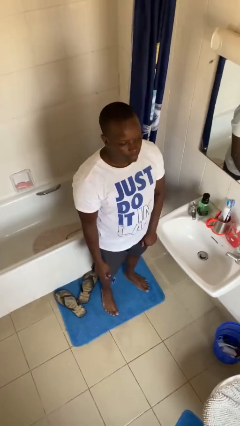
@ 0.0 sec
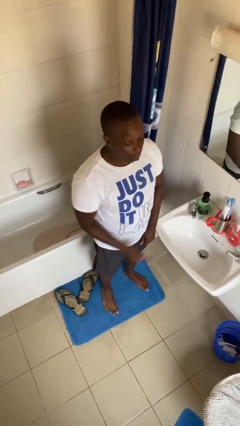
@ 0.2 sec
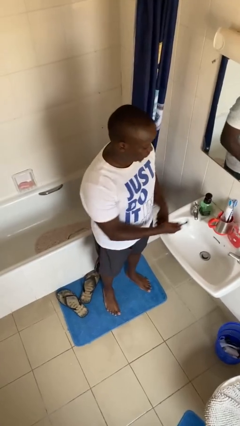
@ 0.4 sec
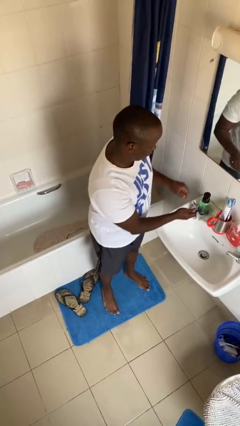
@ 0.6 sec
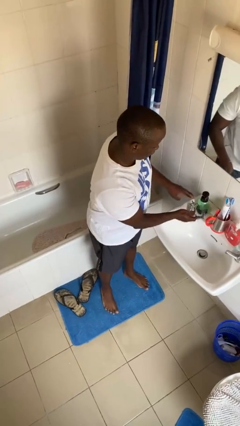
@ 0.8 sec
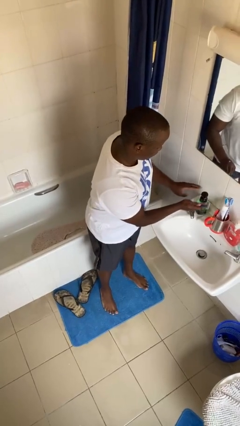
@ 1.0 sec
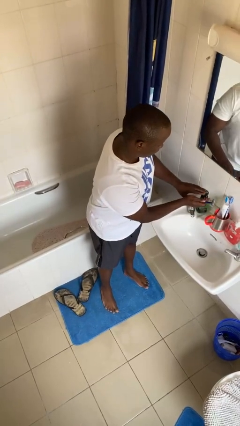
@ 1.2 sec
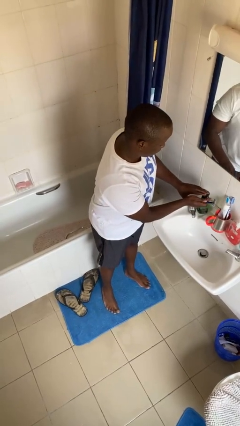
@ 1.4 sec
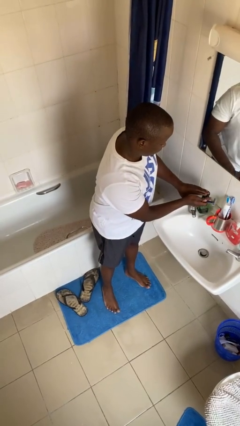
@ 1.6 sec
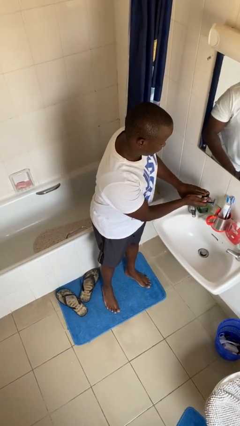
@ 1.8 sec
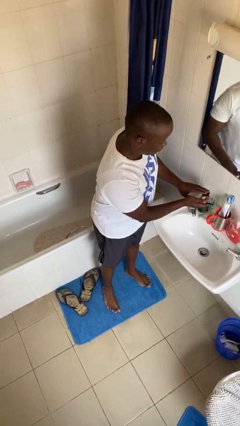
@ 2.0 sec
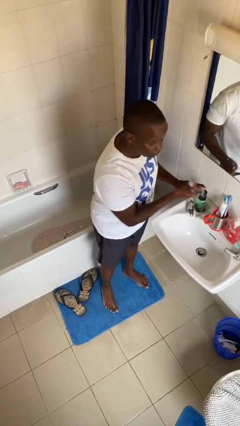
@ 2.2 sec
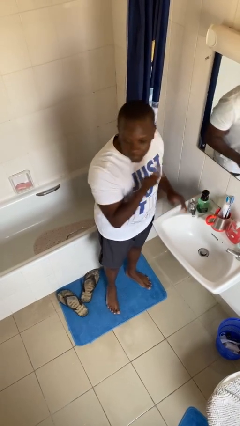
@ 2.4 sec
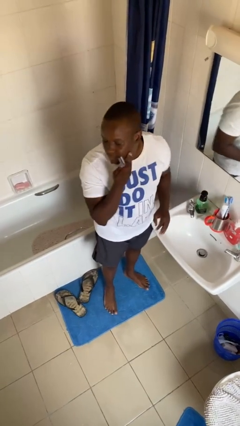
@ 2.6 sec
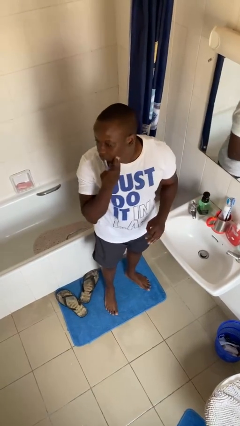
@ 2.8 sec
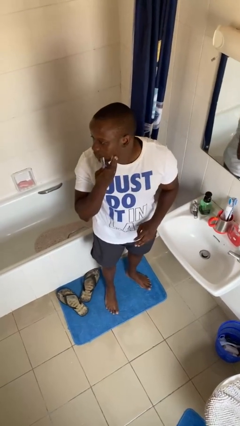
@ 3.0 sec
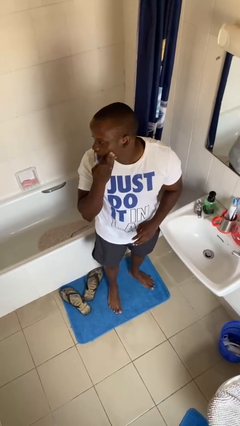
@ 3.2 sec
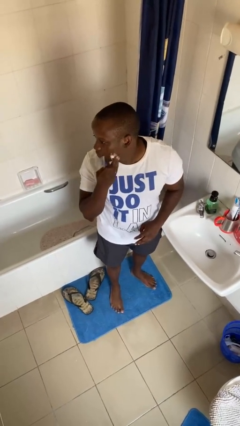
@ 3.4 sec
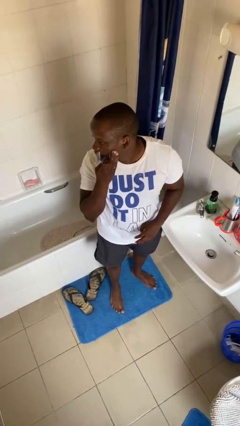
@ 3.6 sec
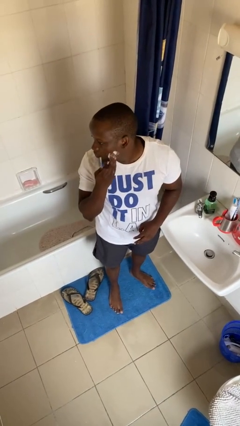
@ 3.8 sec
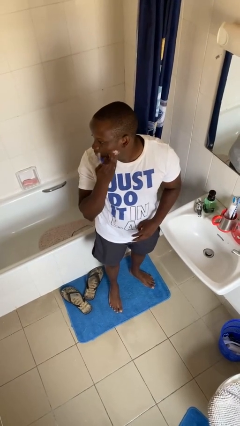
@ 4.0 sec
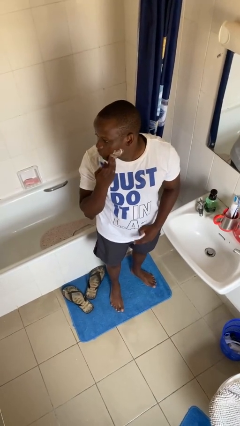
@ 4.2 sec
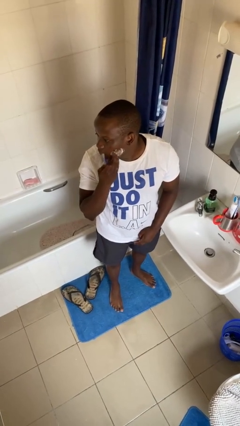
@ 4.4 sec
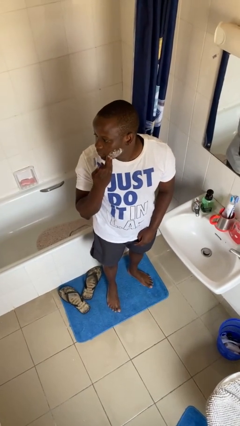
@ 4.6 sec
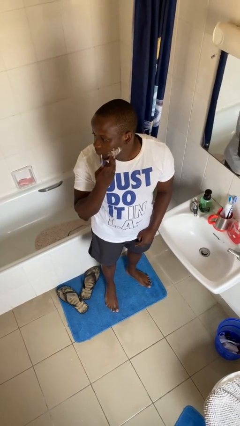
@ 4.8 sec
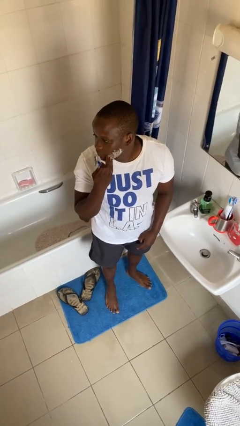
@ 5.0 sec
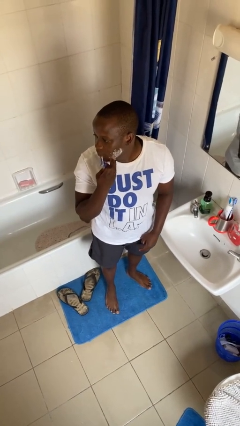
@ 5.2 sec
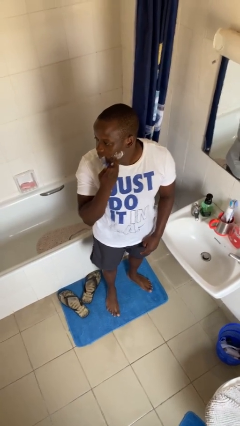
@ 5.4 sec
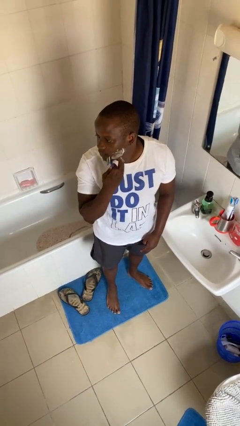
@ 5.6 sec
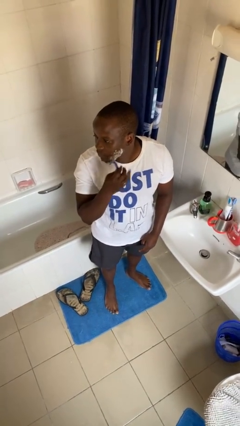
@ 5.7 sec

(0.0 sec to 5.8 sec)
person applies shaving cream

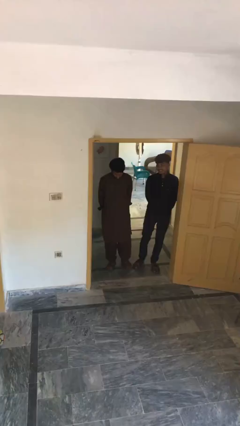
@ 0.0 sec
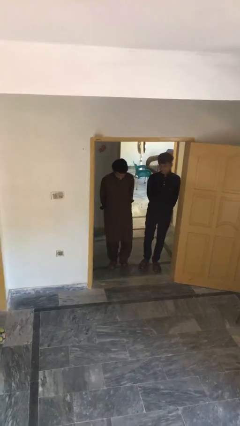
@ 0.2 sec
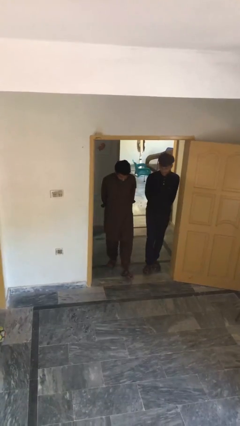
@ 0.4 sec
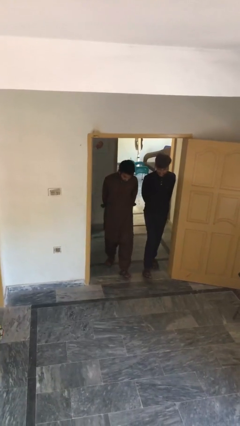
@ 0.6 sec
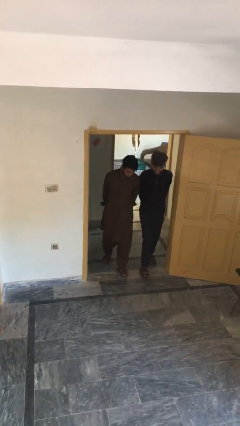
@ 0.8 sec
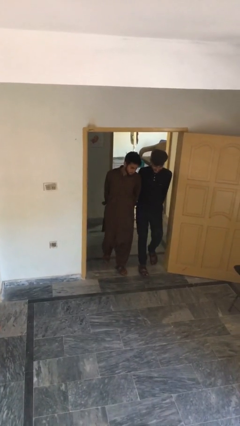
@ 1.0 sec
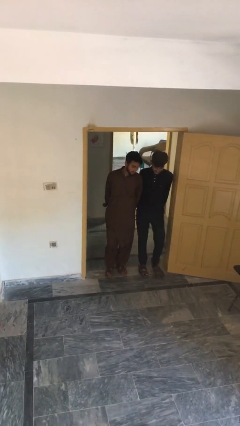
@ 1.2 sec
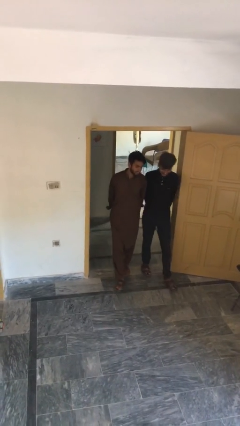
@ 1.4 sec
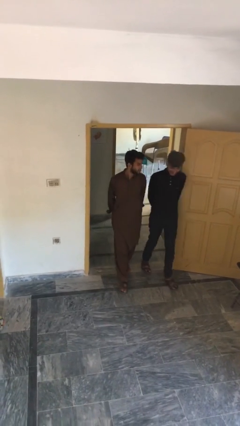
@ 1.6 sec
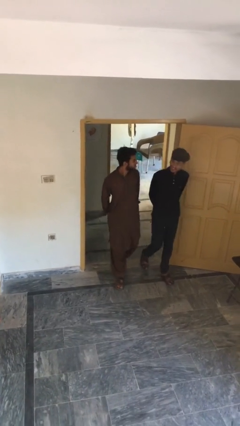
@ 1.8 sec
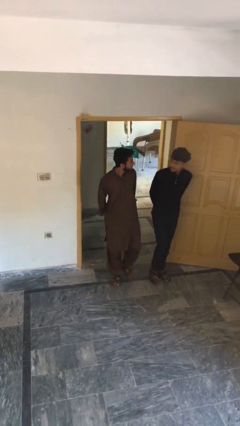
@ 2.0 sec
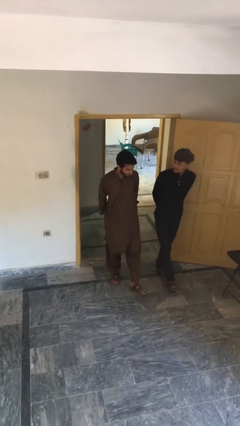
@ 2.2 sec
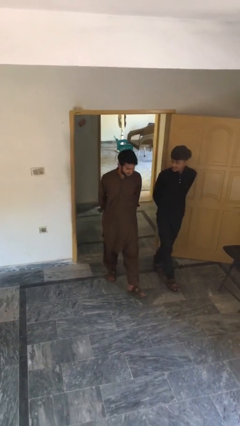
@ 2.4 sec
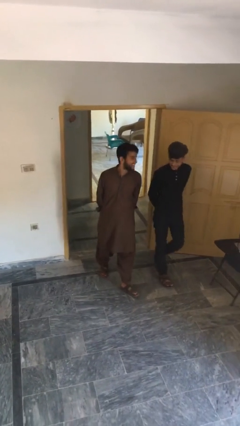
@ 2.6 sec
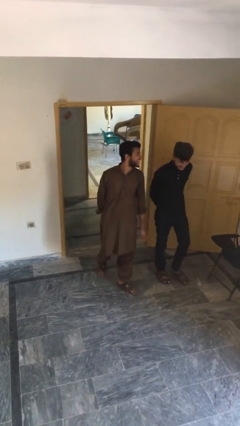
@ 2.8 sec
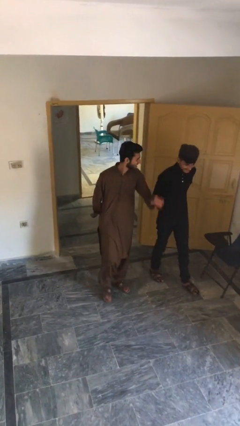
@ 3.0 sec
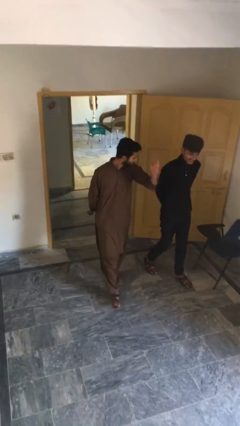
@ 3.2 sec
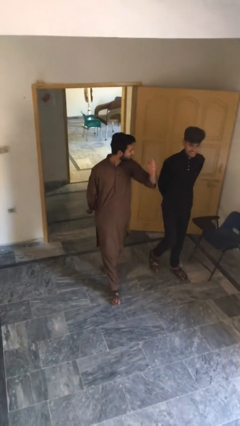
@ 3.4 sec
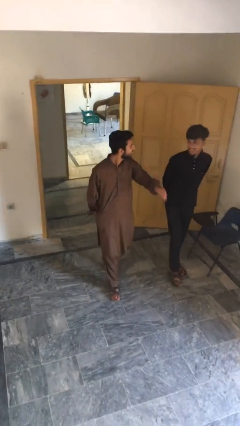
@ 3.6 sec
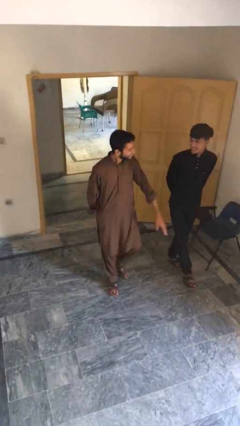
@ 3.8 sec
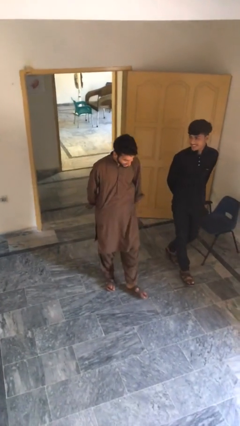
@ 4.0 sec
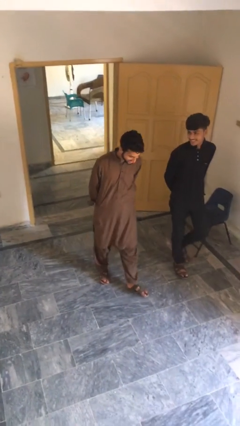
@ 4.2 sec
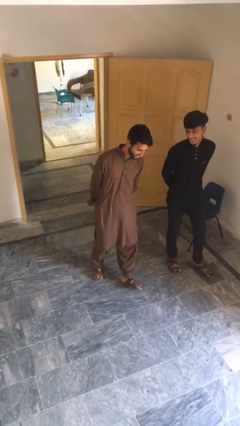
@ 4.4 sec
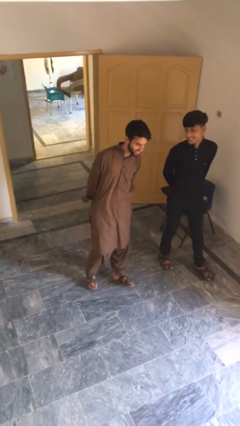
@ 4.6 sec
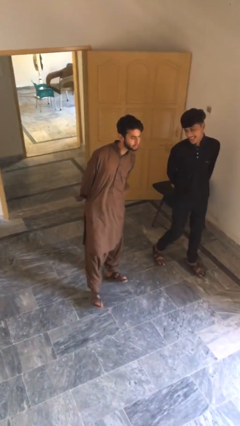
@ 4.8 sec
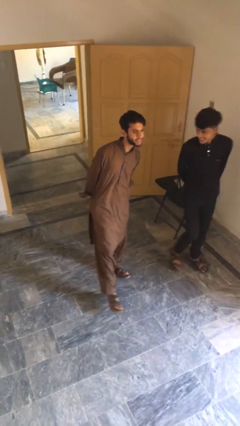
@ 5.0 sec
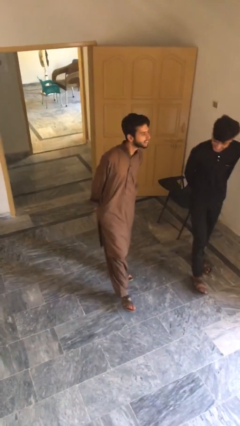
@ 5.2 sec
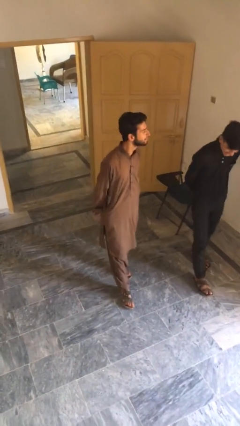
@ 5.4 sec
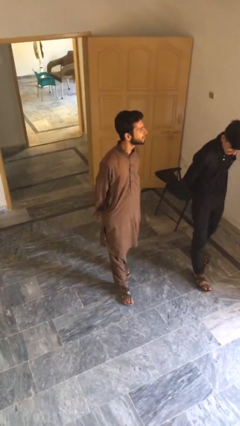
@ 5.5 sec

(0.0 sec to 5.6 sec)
person talks to person

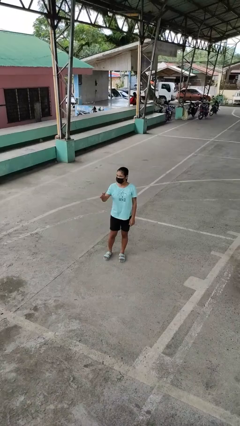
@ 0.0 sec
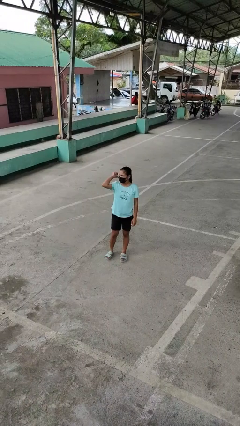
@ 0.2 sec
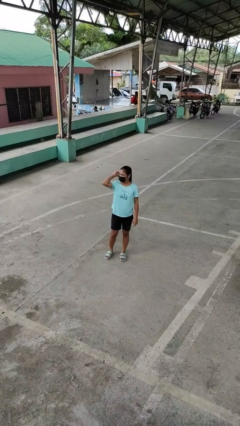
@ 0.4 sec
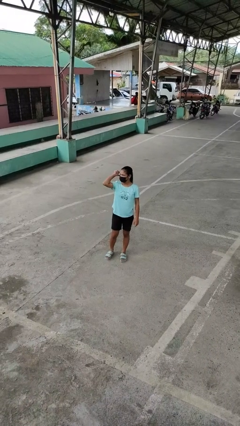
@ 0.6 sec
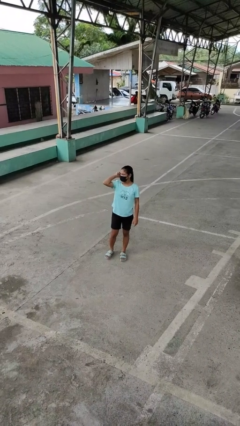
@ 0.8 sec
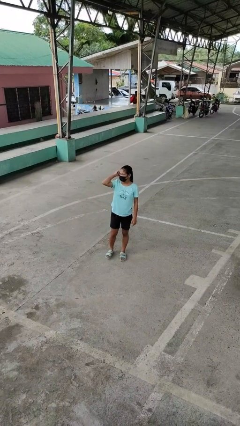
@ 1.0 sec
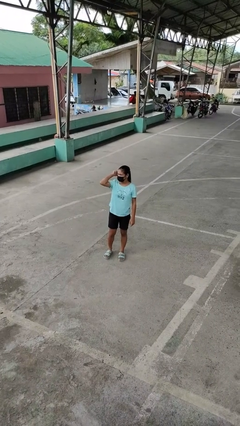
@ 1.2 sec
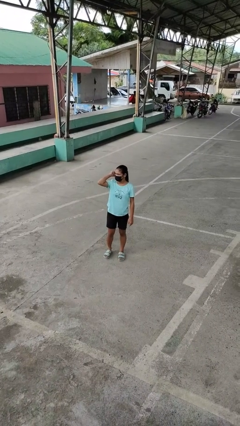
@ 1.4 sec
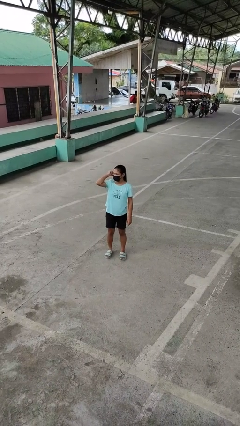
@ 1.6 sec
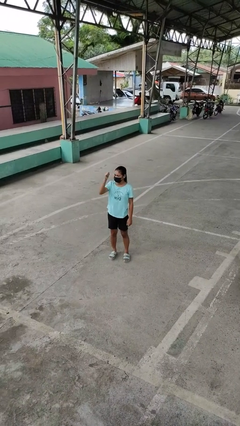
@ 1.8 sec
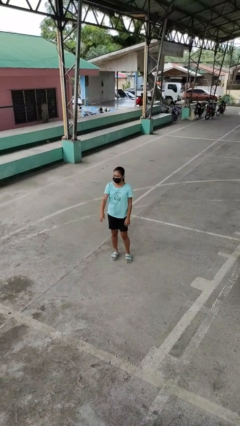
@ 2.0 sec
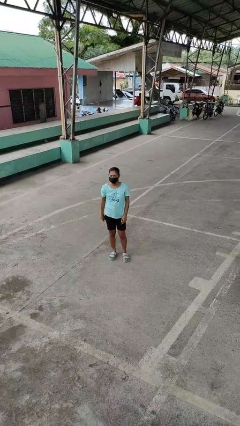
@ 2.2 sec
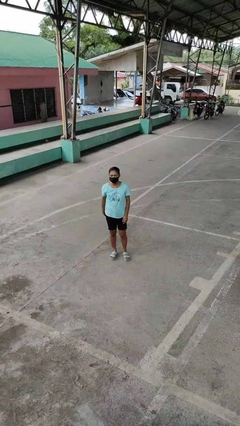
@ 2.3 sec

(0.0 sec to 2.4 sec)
person gestures behind me

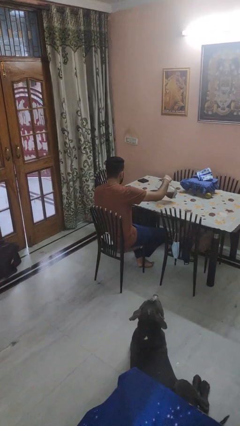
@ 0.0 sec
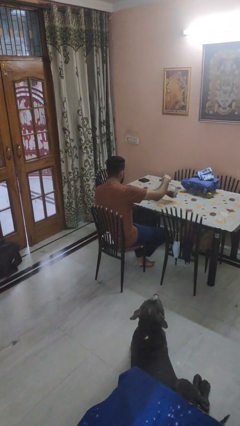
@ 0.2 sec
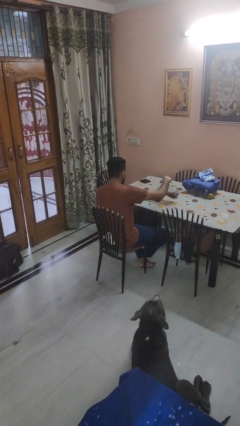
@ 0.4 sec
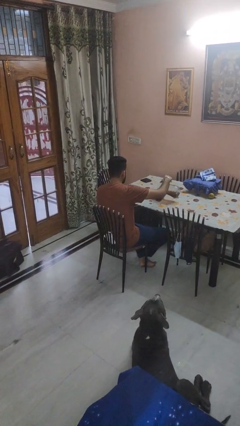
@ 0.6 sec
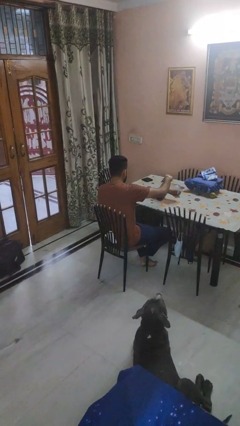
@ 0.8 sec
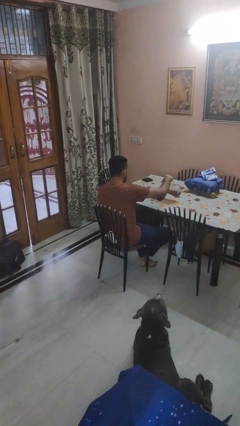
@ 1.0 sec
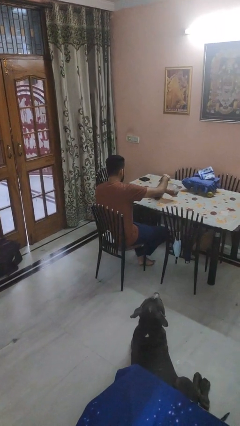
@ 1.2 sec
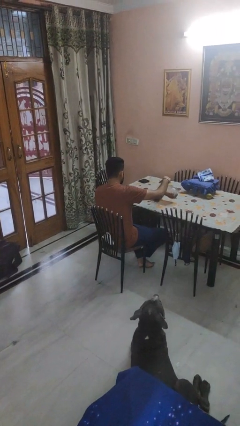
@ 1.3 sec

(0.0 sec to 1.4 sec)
person pours into bowl

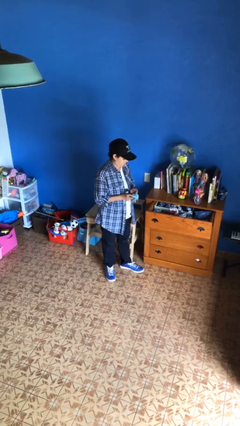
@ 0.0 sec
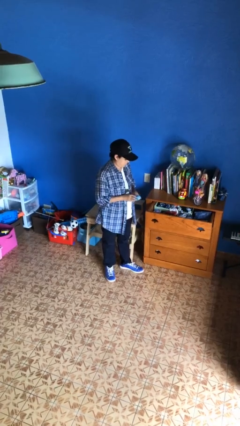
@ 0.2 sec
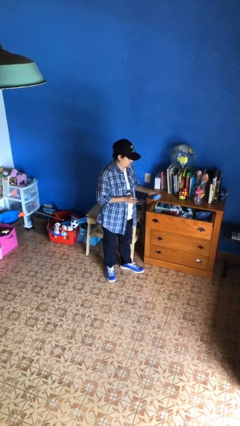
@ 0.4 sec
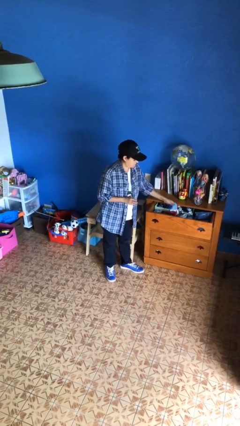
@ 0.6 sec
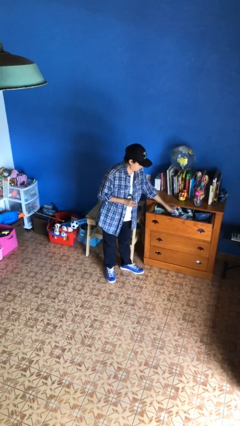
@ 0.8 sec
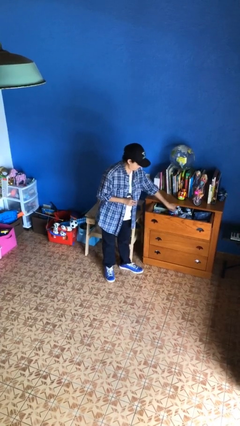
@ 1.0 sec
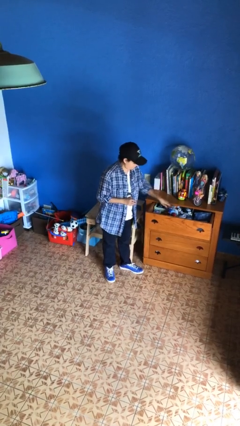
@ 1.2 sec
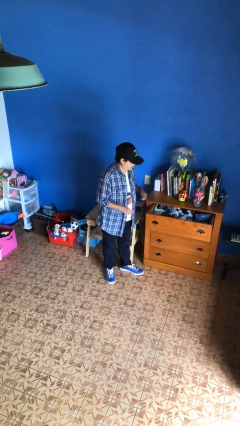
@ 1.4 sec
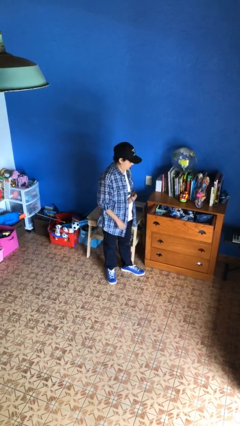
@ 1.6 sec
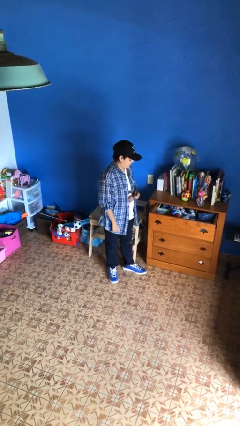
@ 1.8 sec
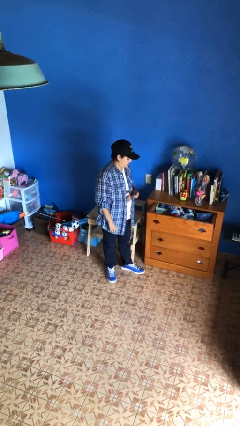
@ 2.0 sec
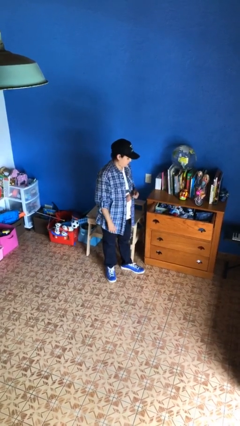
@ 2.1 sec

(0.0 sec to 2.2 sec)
person puts clothes into dresser
